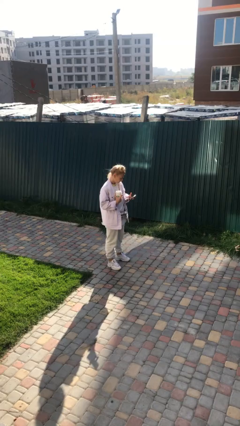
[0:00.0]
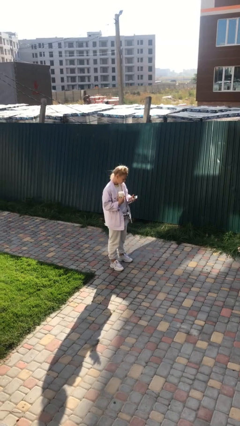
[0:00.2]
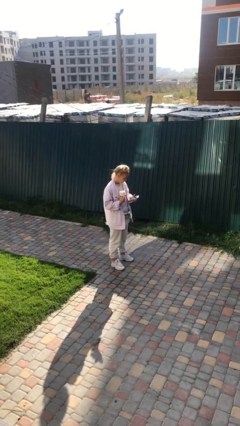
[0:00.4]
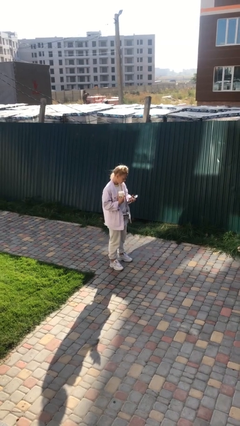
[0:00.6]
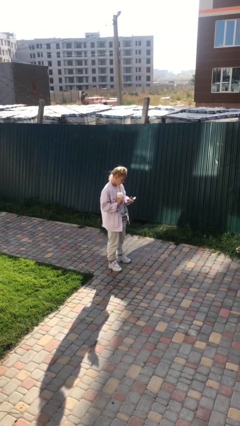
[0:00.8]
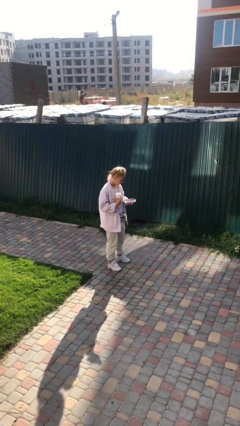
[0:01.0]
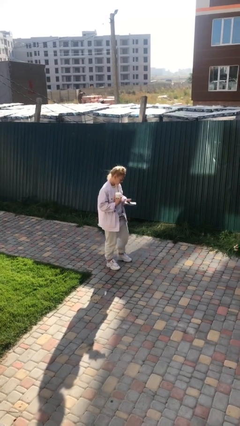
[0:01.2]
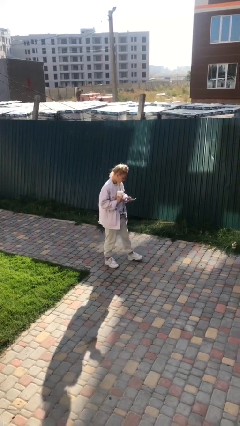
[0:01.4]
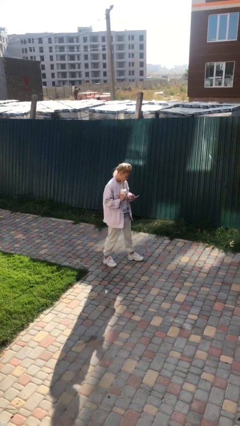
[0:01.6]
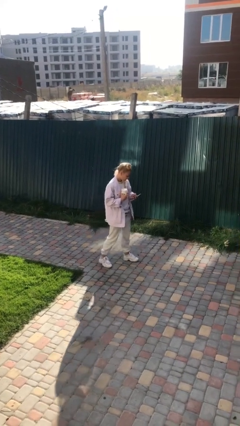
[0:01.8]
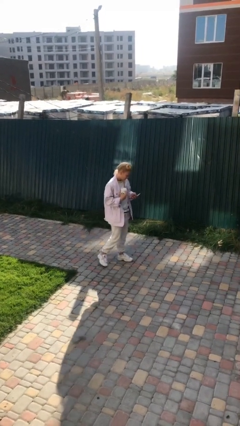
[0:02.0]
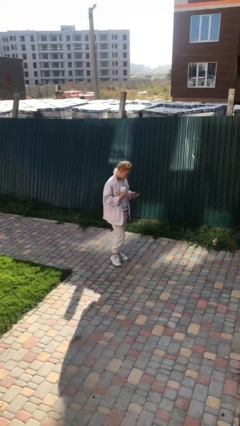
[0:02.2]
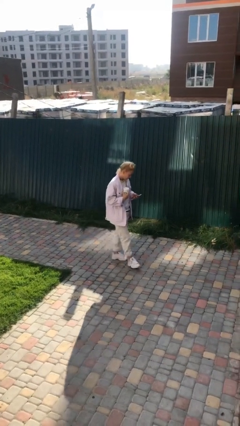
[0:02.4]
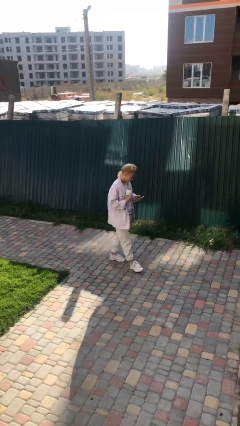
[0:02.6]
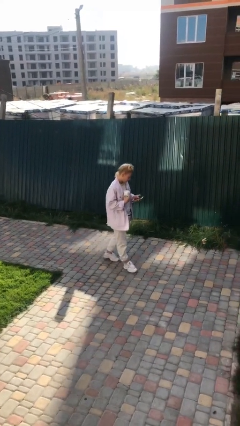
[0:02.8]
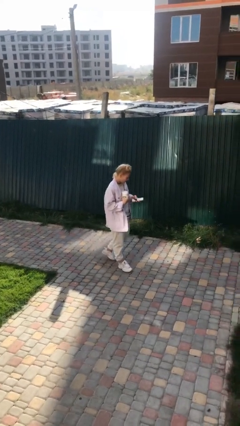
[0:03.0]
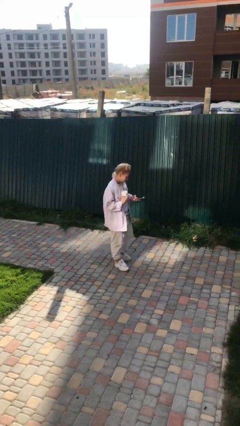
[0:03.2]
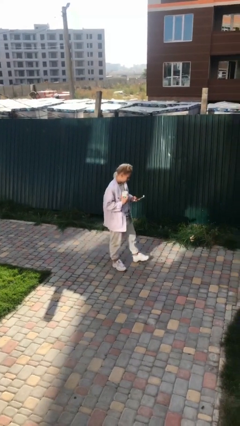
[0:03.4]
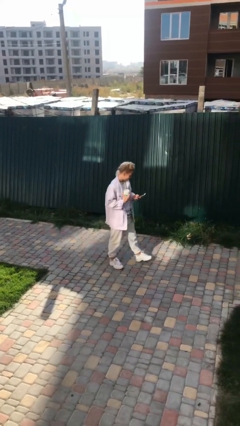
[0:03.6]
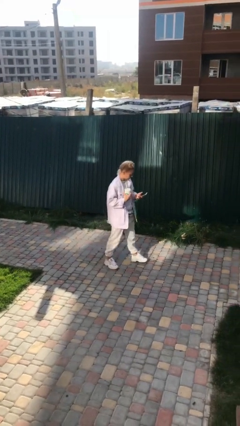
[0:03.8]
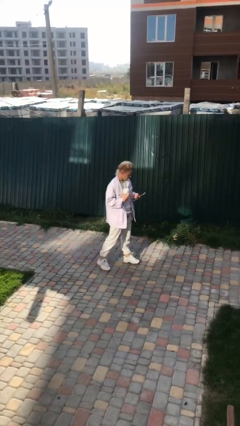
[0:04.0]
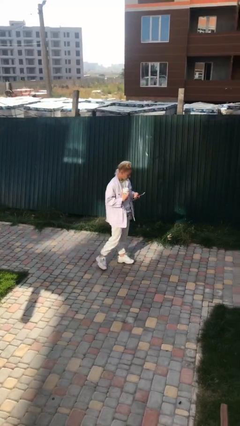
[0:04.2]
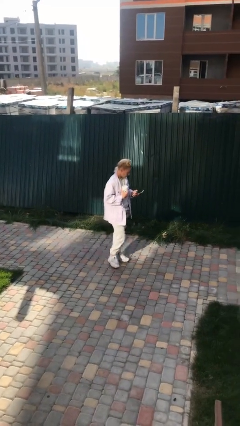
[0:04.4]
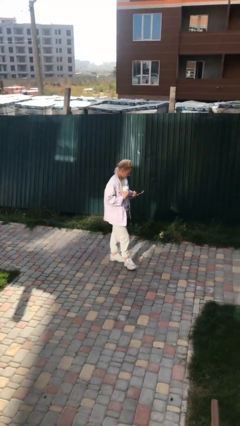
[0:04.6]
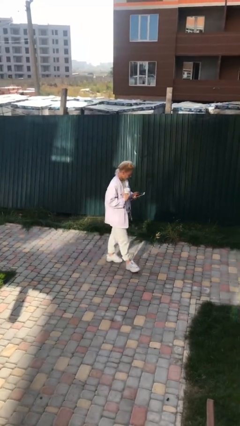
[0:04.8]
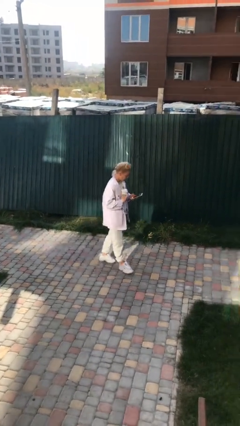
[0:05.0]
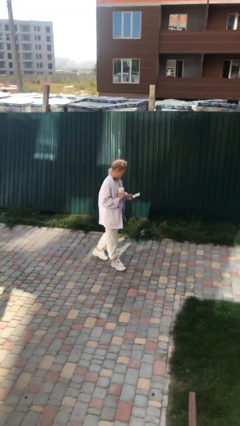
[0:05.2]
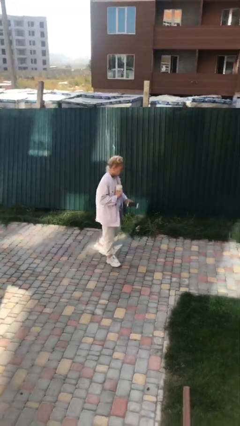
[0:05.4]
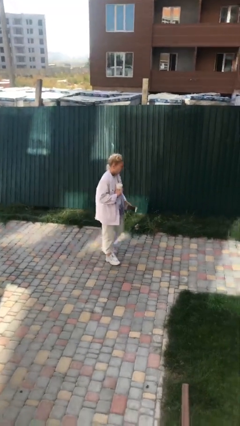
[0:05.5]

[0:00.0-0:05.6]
person texts on phone

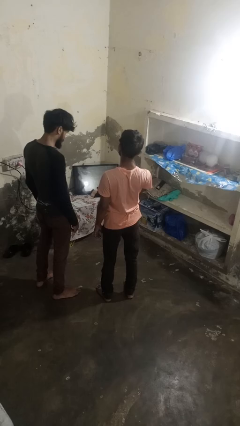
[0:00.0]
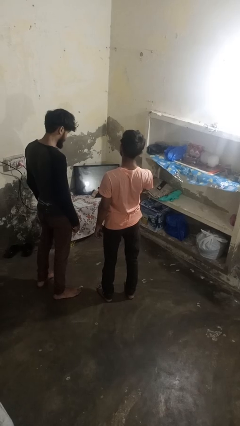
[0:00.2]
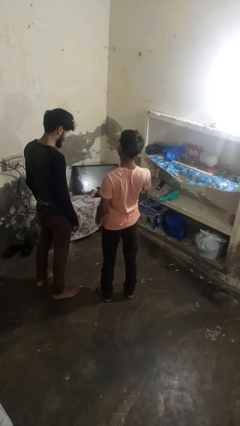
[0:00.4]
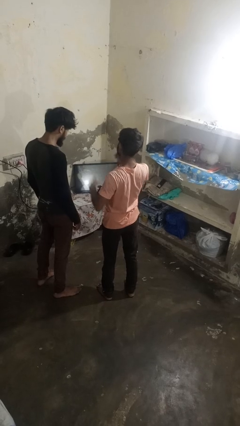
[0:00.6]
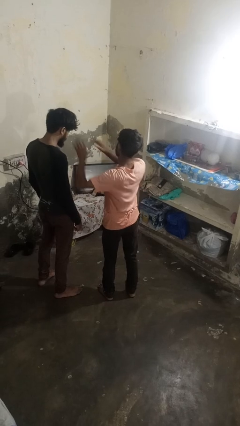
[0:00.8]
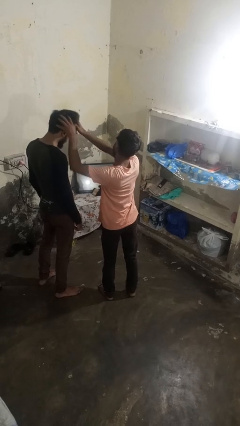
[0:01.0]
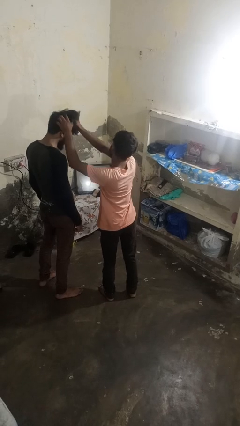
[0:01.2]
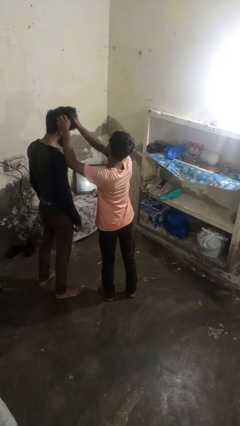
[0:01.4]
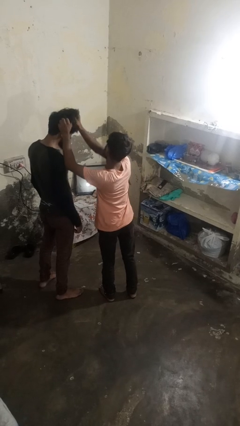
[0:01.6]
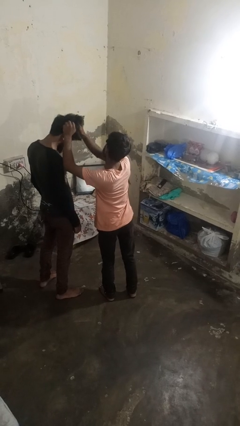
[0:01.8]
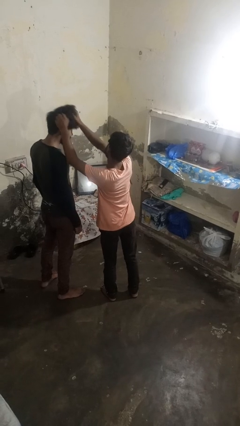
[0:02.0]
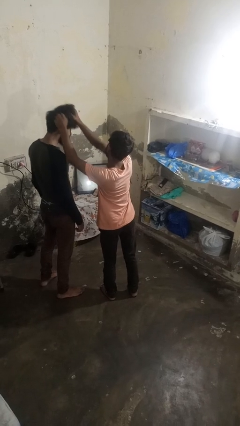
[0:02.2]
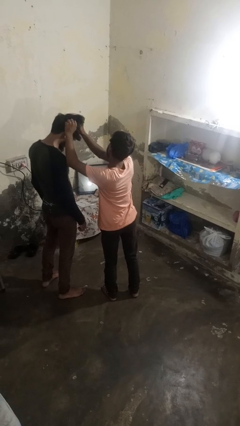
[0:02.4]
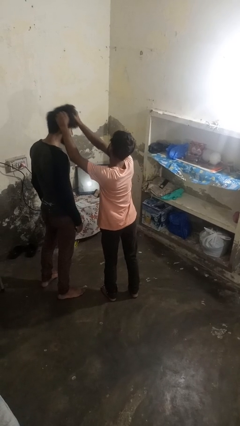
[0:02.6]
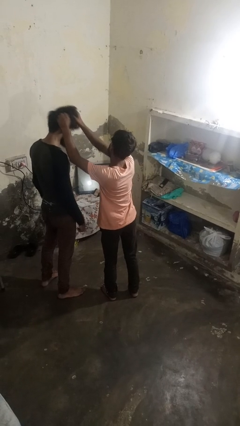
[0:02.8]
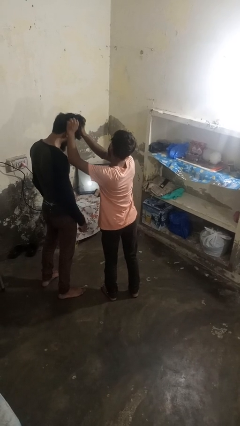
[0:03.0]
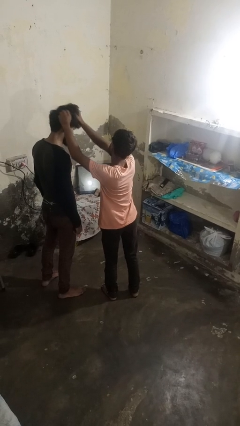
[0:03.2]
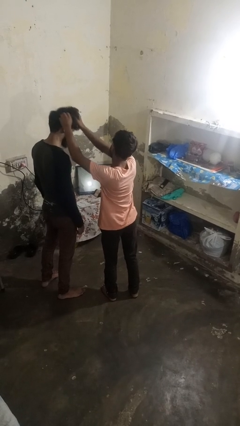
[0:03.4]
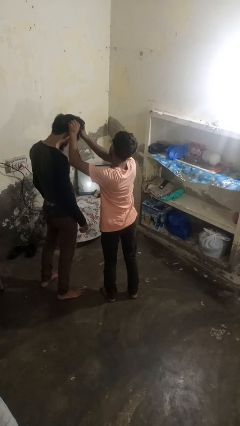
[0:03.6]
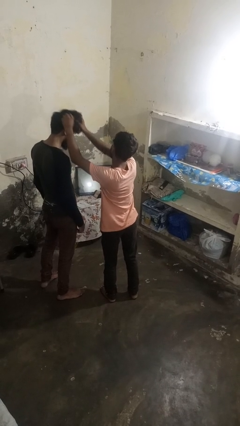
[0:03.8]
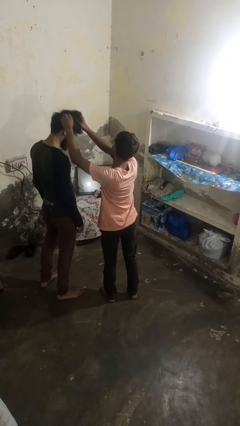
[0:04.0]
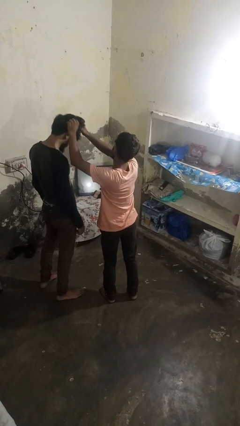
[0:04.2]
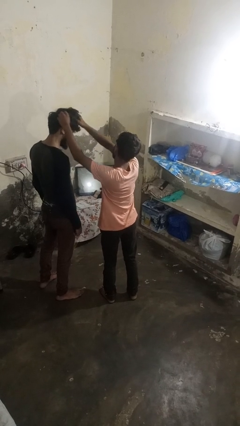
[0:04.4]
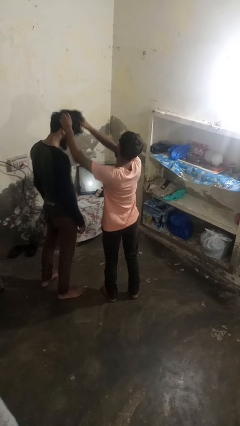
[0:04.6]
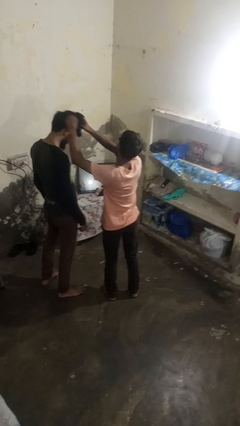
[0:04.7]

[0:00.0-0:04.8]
person grabs person by hair

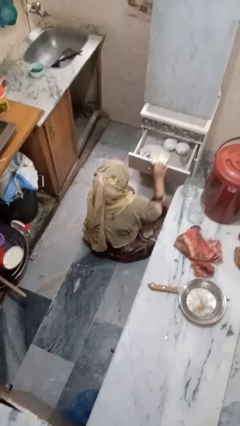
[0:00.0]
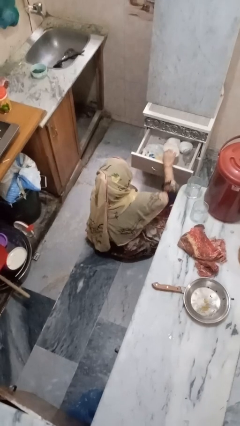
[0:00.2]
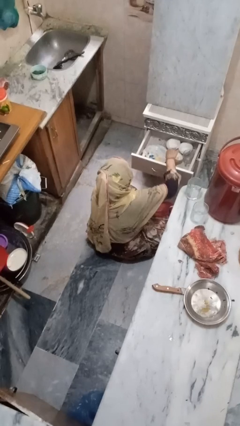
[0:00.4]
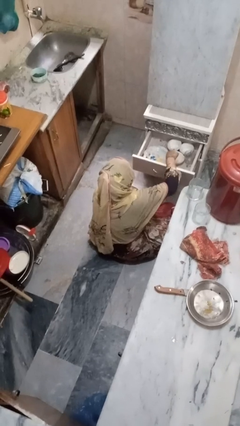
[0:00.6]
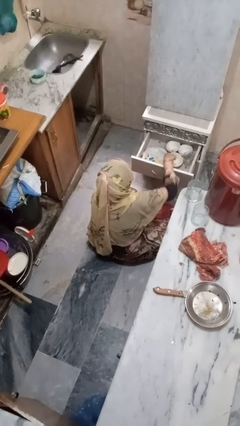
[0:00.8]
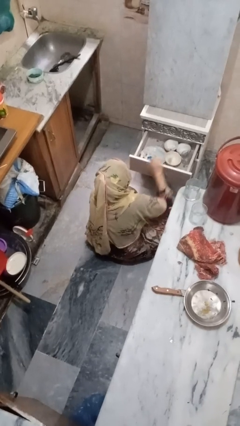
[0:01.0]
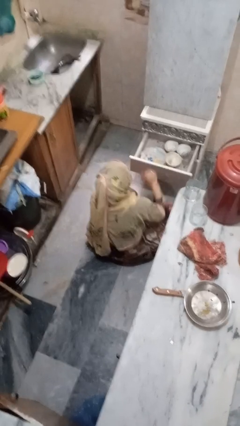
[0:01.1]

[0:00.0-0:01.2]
person puts object into kitchen drawer

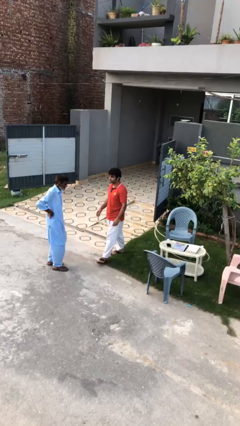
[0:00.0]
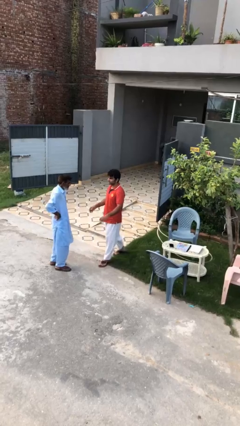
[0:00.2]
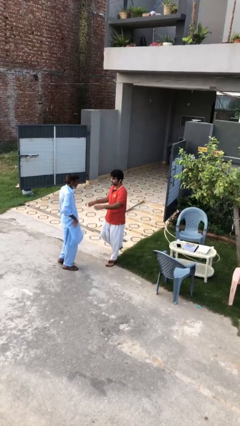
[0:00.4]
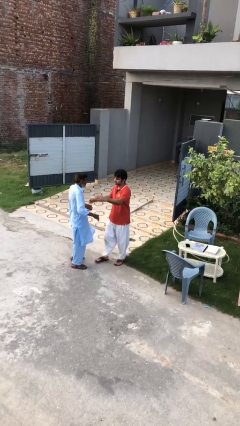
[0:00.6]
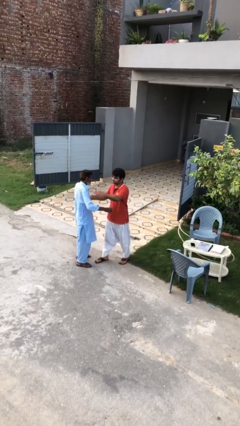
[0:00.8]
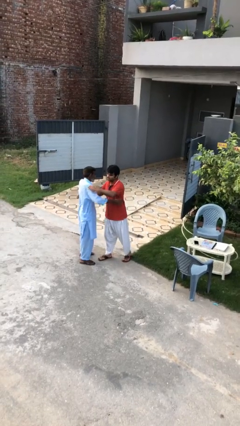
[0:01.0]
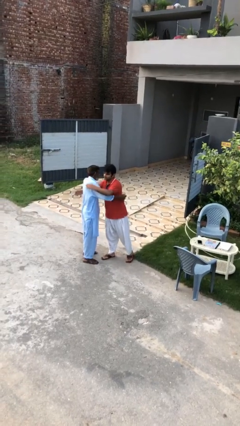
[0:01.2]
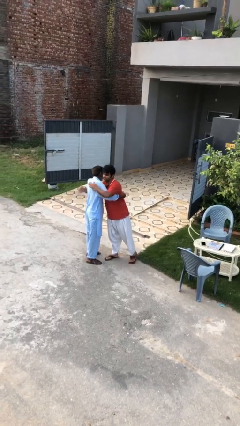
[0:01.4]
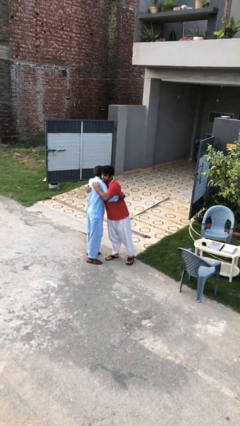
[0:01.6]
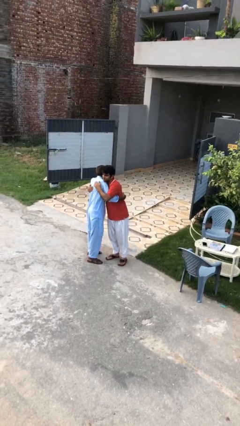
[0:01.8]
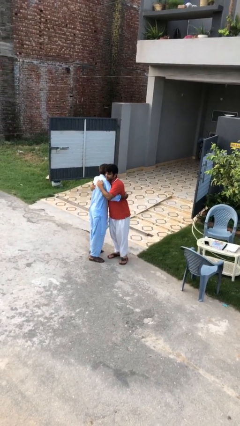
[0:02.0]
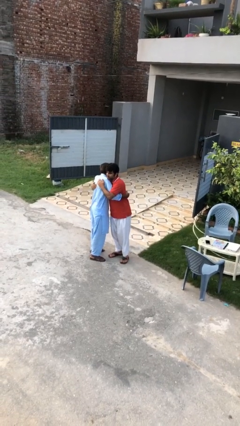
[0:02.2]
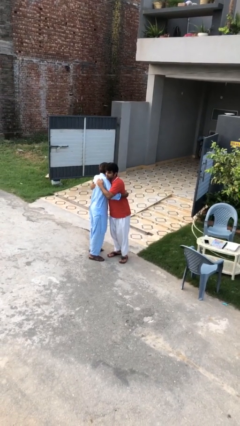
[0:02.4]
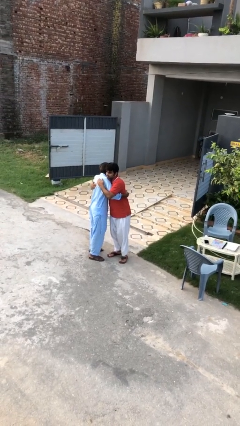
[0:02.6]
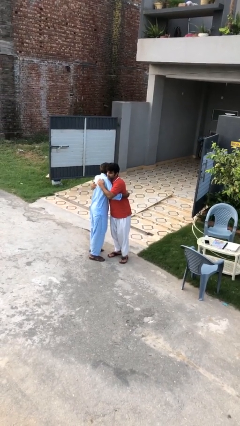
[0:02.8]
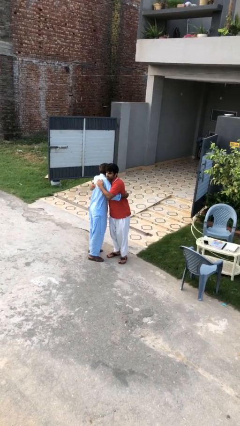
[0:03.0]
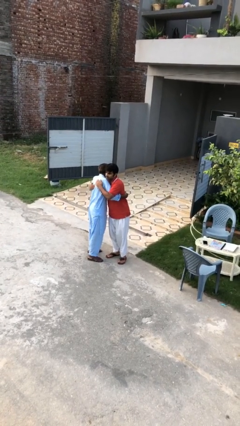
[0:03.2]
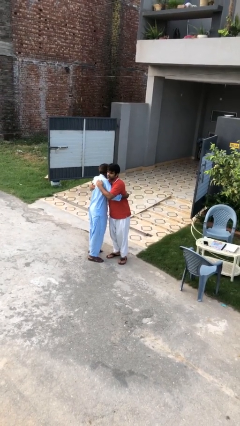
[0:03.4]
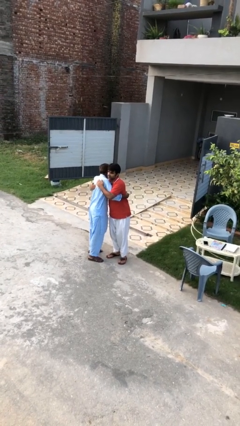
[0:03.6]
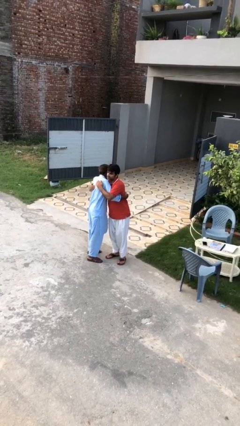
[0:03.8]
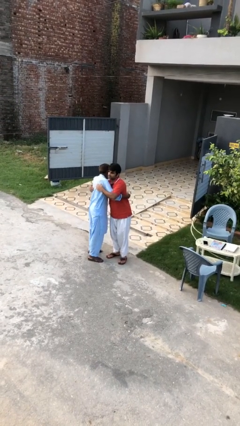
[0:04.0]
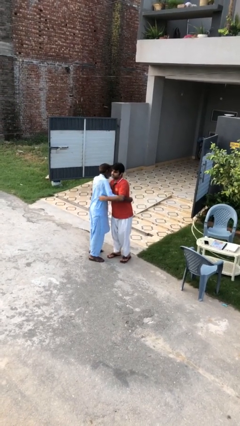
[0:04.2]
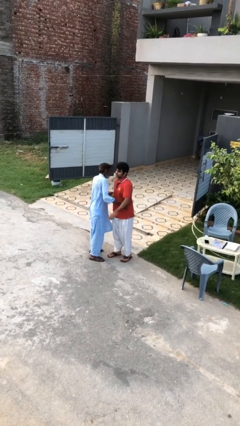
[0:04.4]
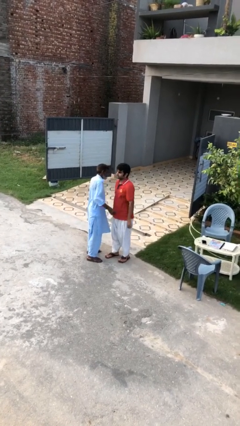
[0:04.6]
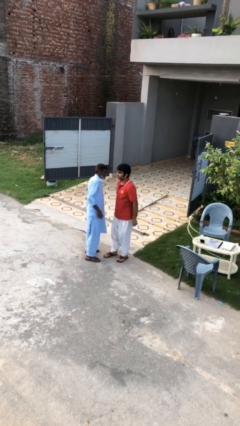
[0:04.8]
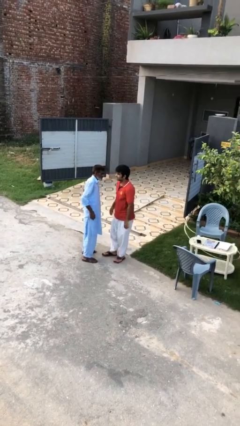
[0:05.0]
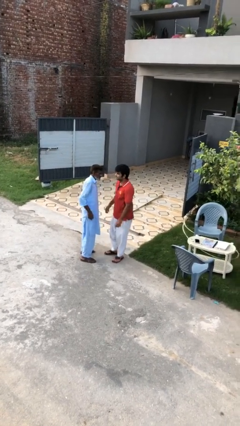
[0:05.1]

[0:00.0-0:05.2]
person embraces person

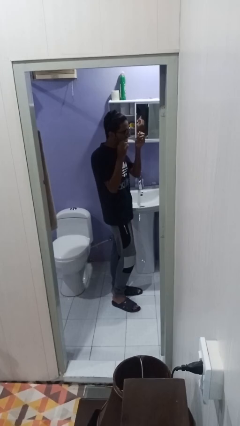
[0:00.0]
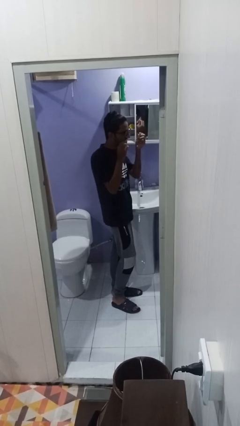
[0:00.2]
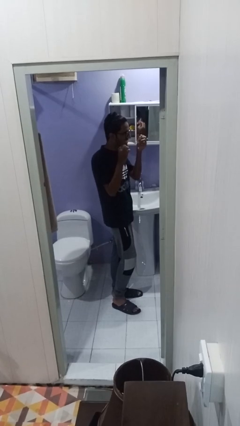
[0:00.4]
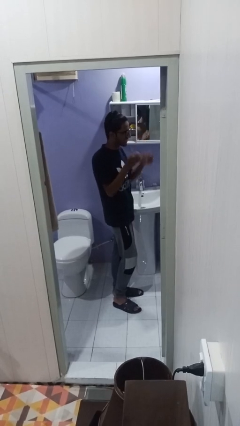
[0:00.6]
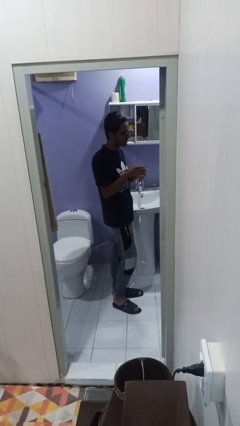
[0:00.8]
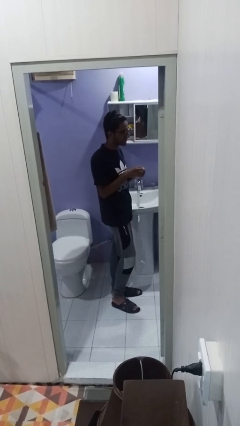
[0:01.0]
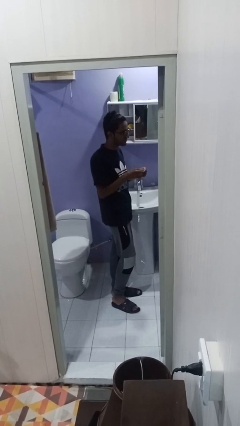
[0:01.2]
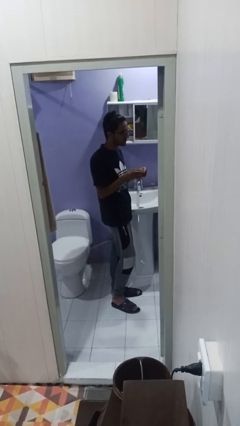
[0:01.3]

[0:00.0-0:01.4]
person flosses
